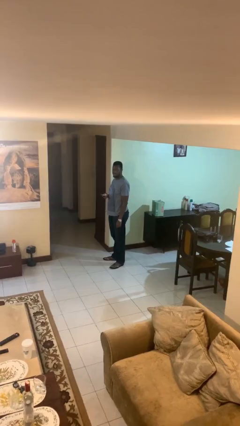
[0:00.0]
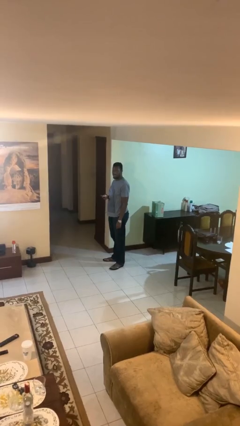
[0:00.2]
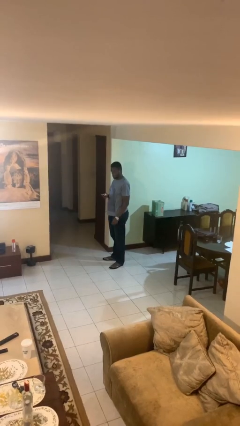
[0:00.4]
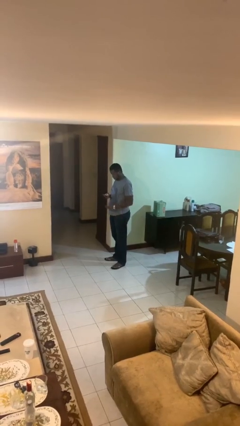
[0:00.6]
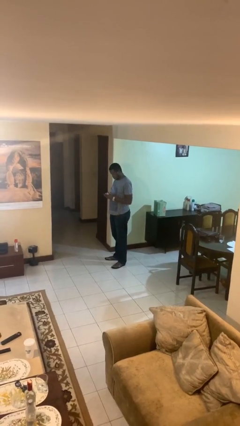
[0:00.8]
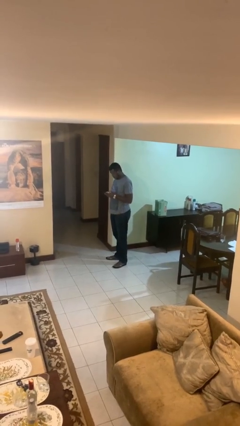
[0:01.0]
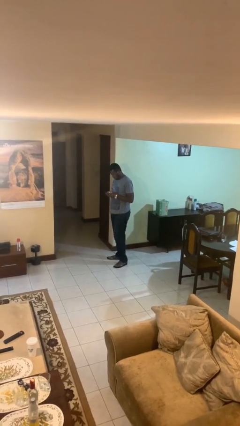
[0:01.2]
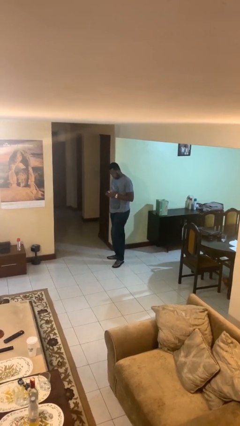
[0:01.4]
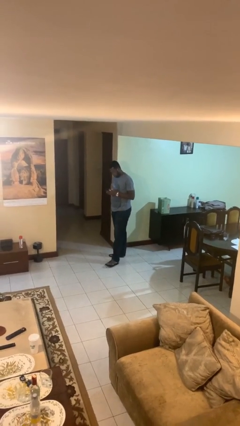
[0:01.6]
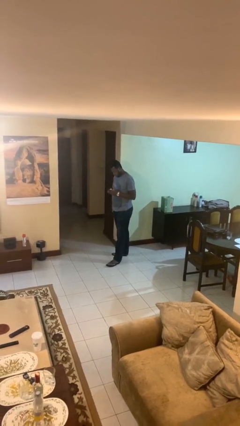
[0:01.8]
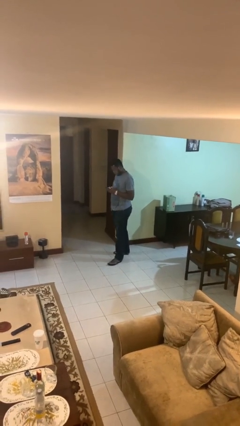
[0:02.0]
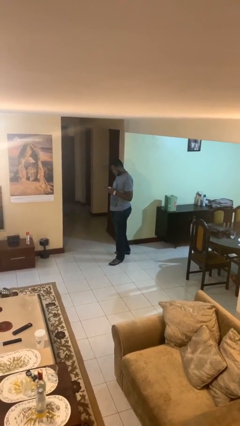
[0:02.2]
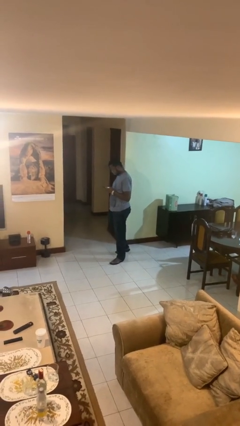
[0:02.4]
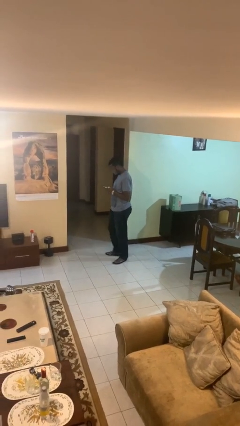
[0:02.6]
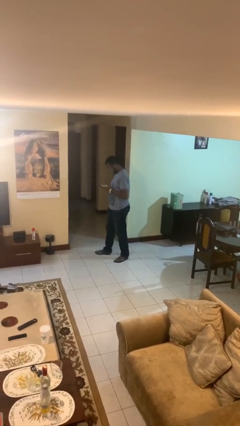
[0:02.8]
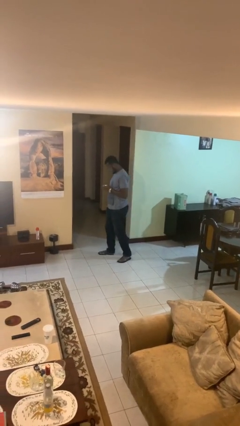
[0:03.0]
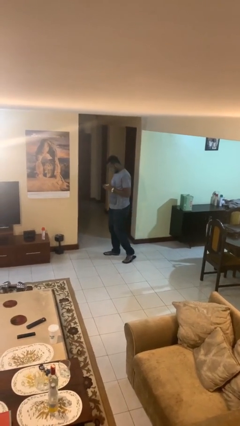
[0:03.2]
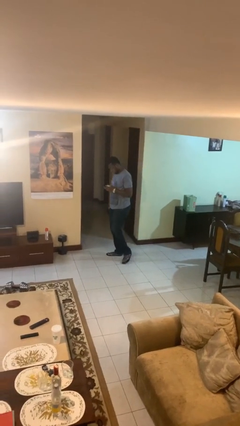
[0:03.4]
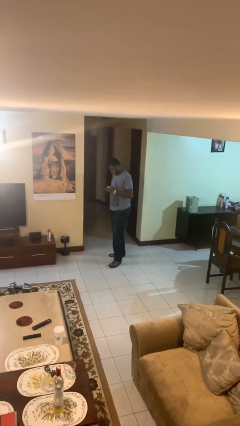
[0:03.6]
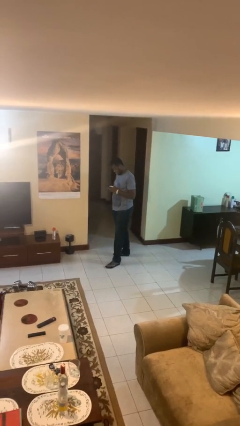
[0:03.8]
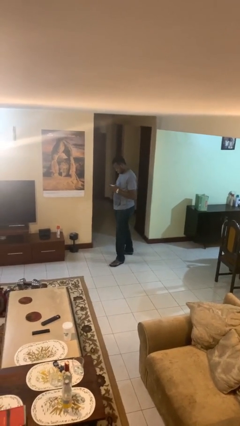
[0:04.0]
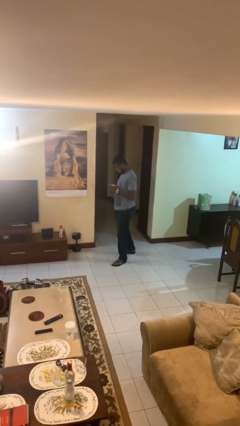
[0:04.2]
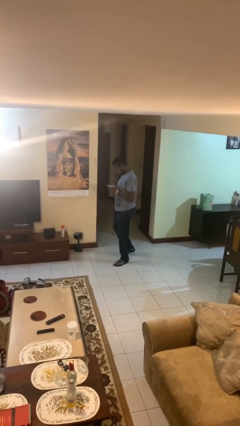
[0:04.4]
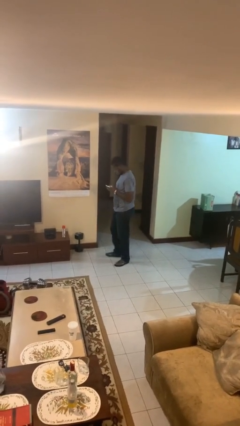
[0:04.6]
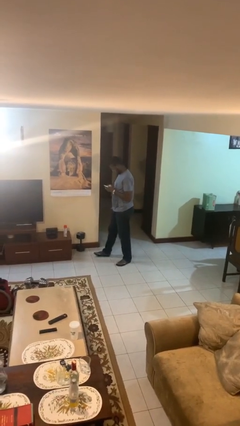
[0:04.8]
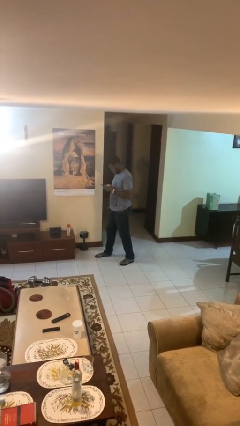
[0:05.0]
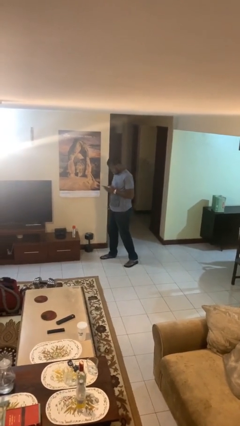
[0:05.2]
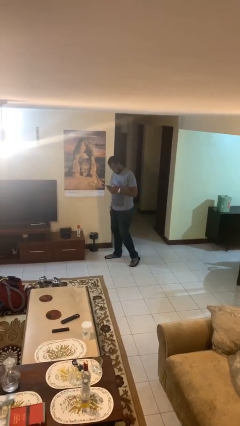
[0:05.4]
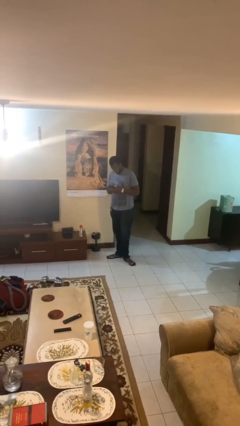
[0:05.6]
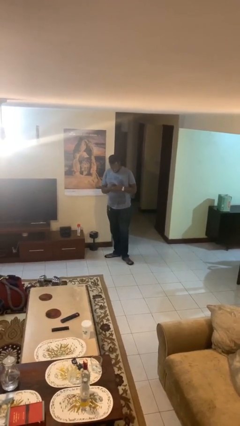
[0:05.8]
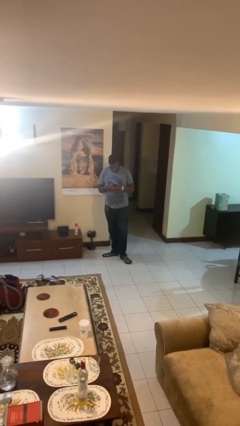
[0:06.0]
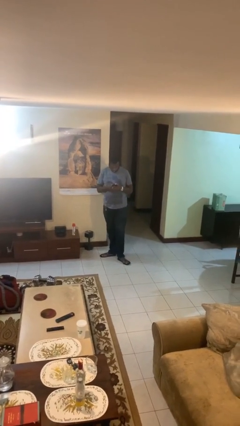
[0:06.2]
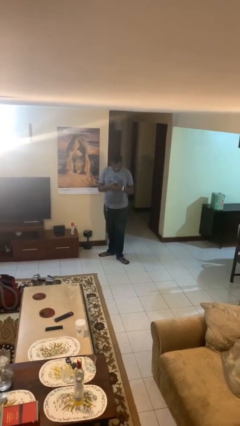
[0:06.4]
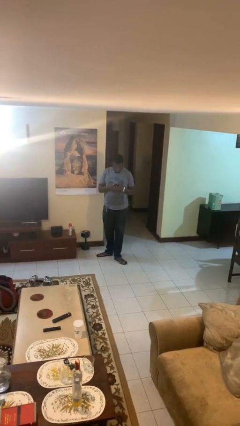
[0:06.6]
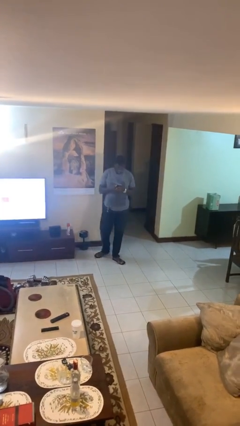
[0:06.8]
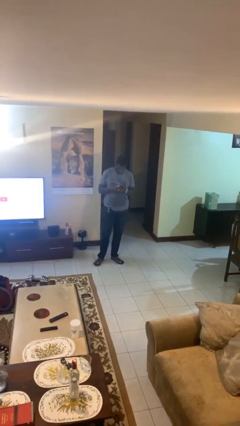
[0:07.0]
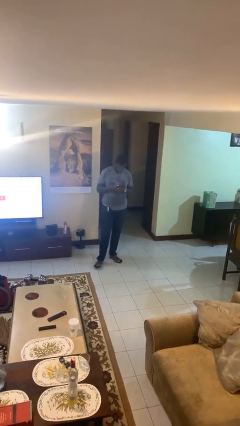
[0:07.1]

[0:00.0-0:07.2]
person texts on phone

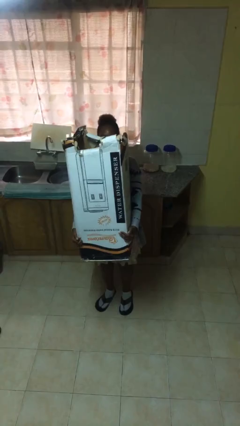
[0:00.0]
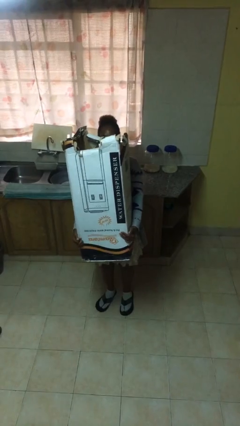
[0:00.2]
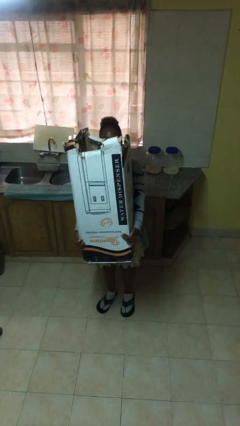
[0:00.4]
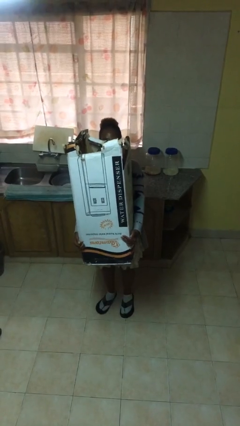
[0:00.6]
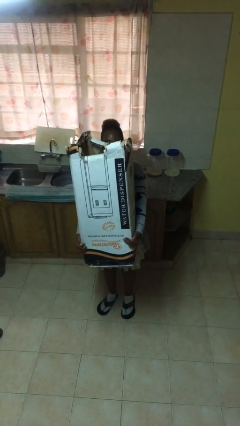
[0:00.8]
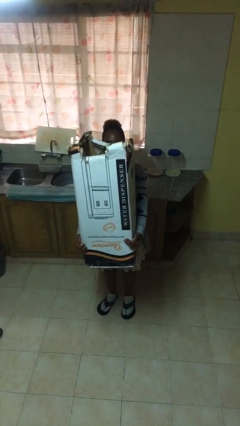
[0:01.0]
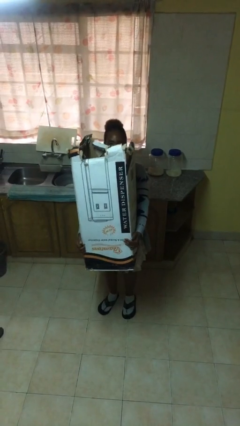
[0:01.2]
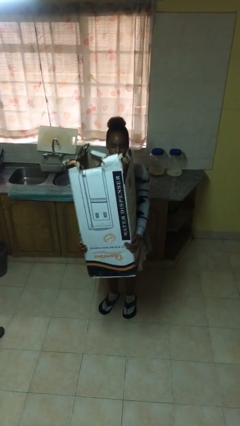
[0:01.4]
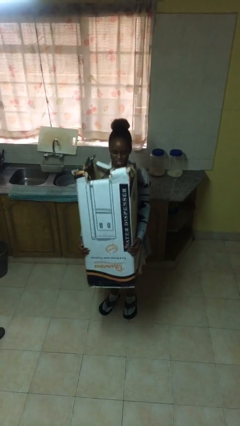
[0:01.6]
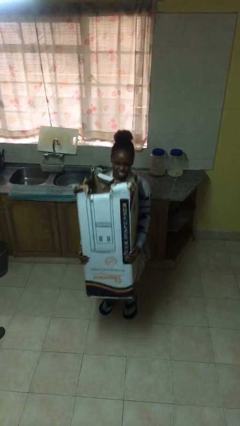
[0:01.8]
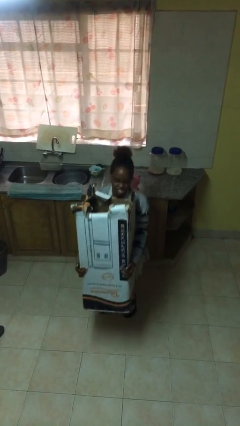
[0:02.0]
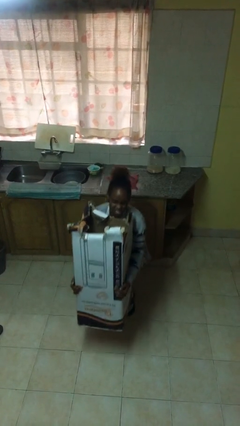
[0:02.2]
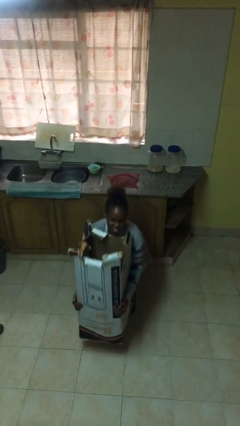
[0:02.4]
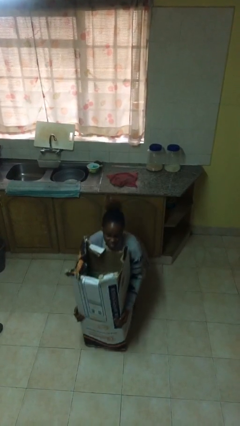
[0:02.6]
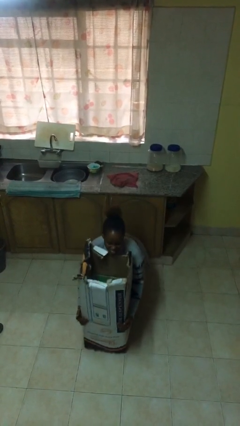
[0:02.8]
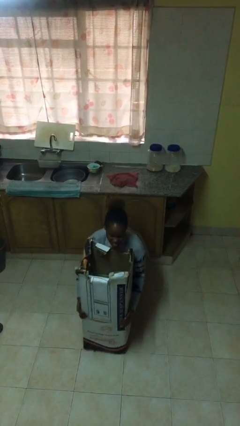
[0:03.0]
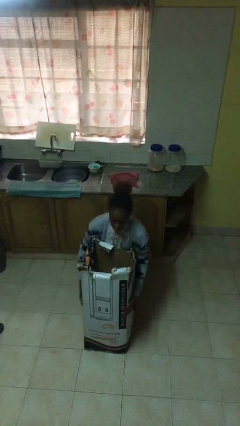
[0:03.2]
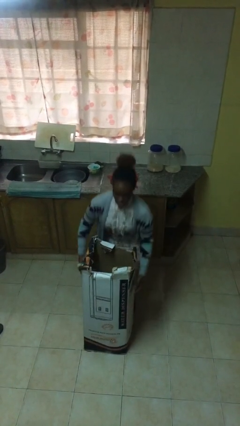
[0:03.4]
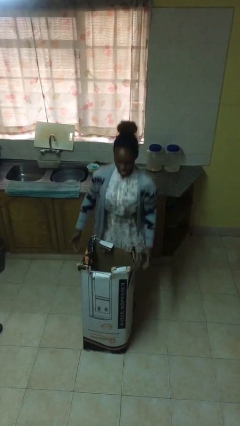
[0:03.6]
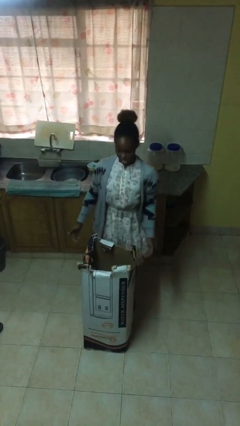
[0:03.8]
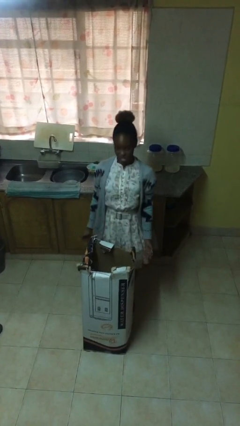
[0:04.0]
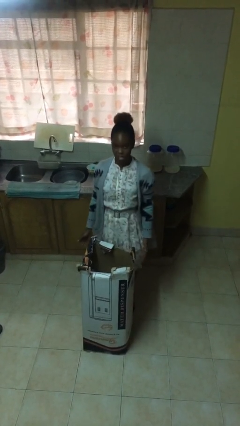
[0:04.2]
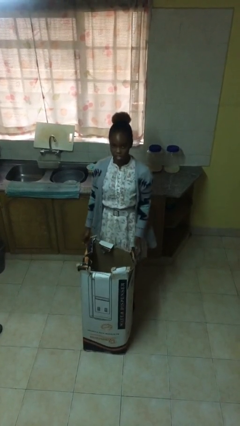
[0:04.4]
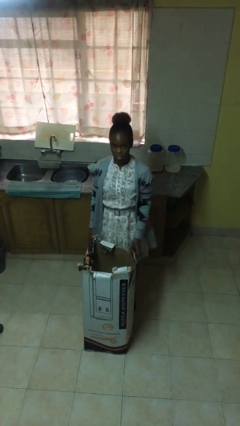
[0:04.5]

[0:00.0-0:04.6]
person puts down object on floor

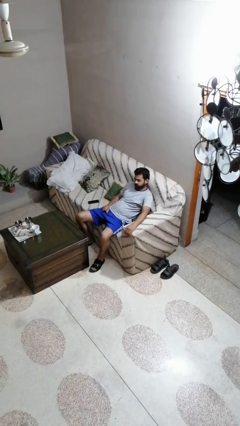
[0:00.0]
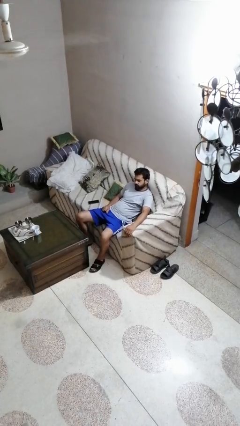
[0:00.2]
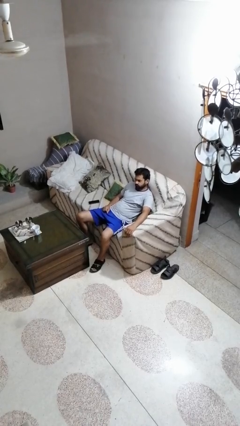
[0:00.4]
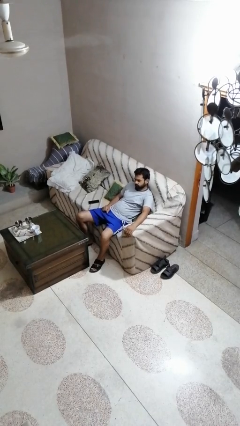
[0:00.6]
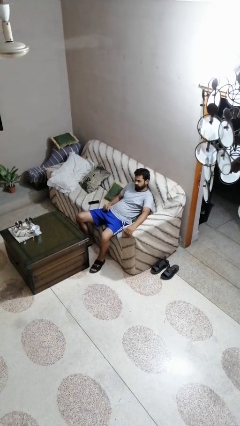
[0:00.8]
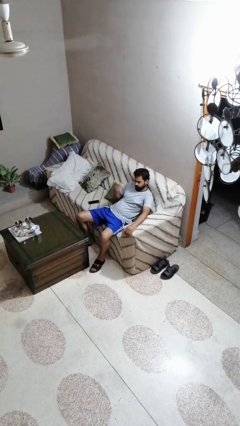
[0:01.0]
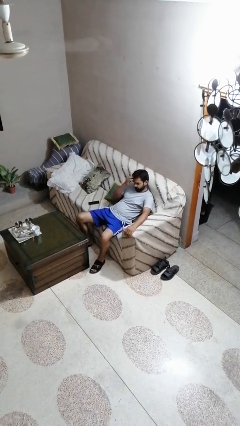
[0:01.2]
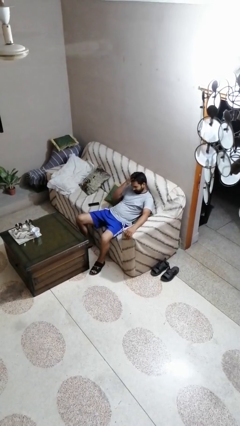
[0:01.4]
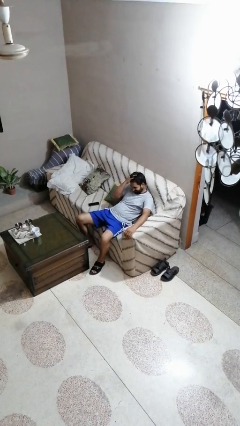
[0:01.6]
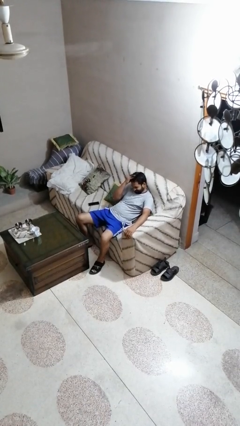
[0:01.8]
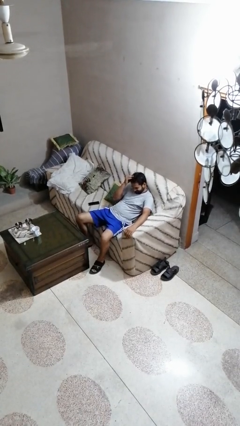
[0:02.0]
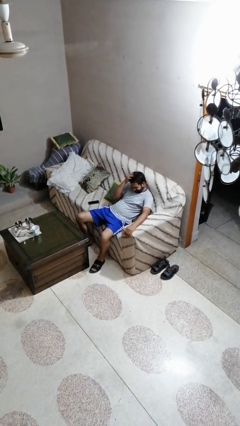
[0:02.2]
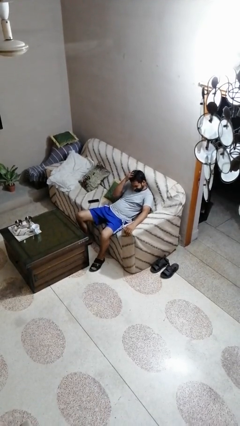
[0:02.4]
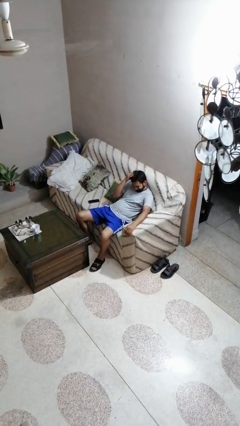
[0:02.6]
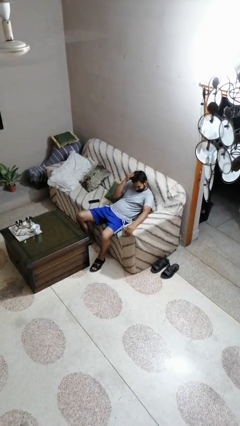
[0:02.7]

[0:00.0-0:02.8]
person strokes hair

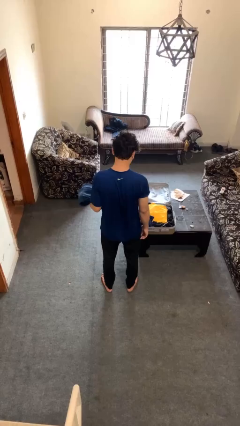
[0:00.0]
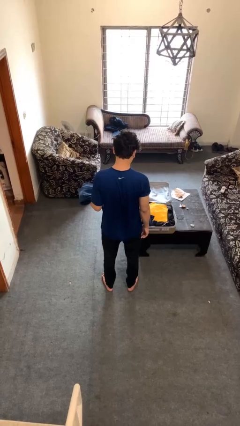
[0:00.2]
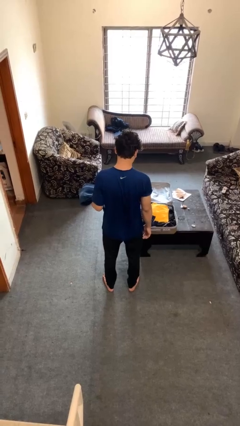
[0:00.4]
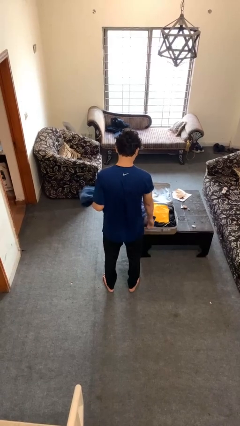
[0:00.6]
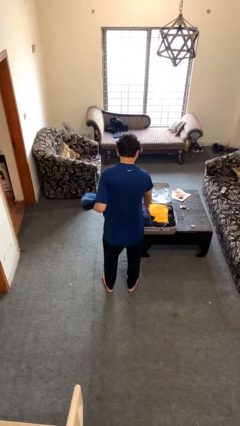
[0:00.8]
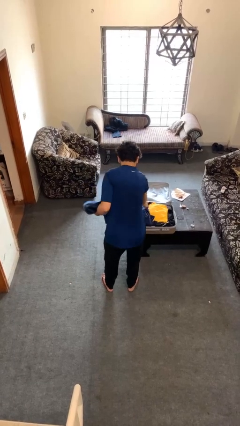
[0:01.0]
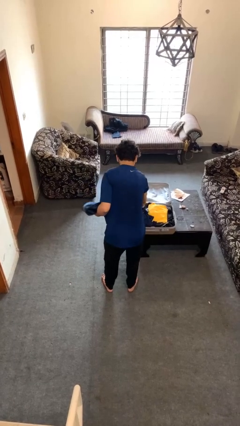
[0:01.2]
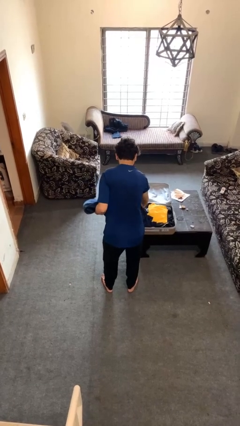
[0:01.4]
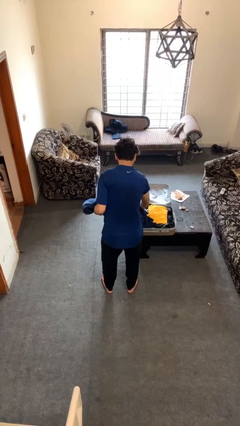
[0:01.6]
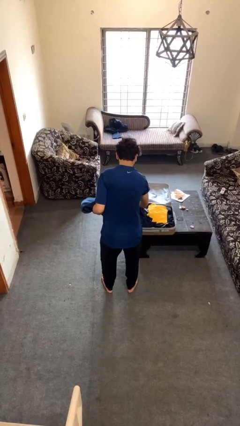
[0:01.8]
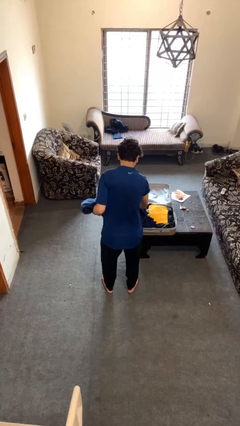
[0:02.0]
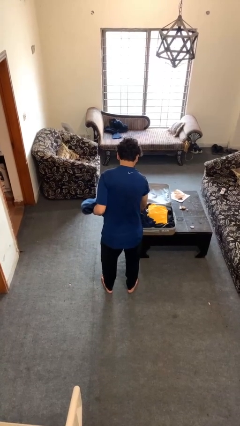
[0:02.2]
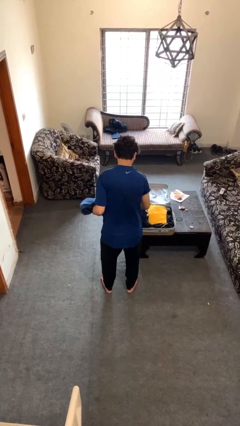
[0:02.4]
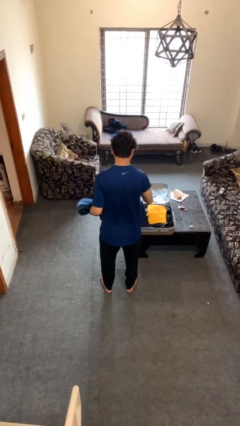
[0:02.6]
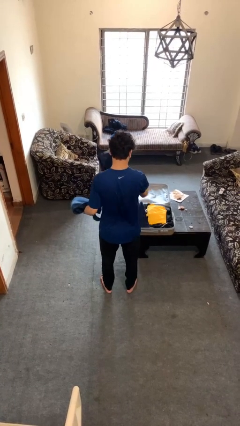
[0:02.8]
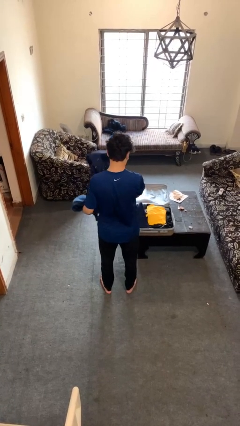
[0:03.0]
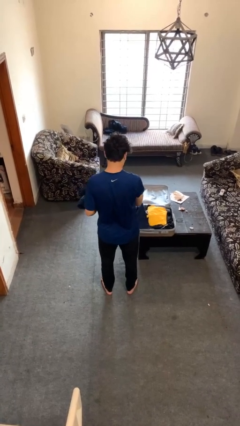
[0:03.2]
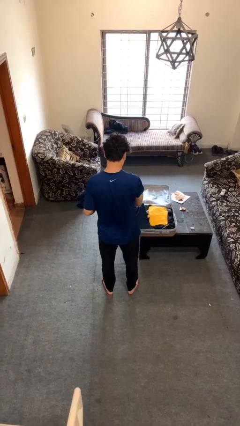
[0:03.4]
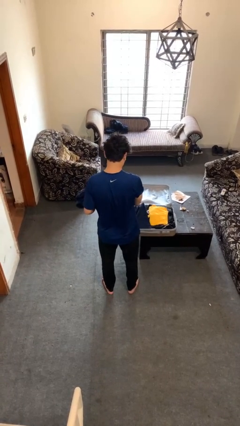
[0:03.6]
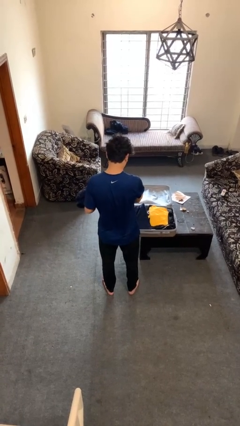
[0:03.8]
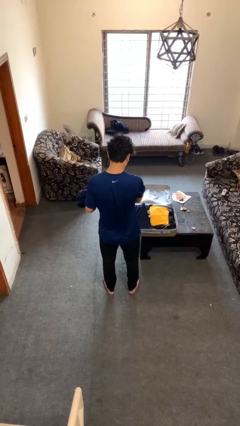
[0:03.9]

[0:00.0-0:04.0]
person unloads clothes from suitcase
